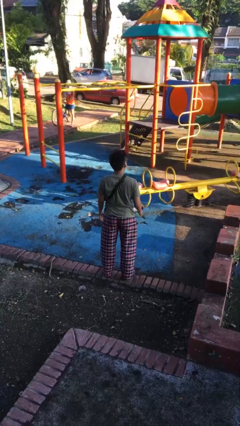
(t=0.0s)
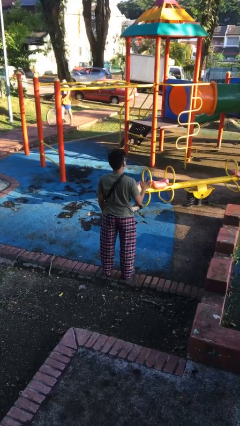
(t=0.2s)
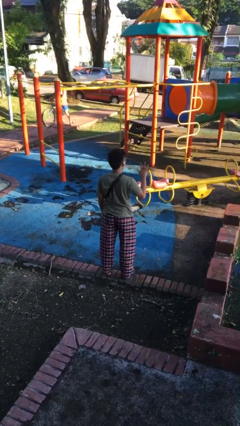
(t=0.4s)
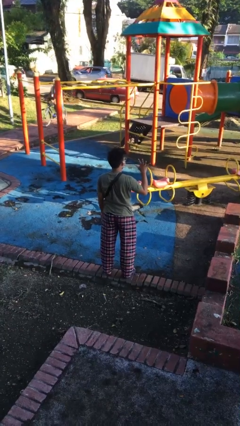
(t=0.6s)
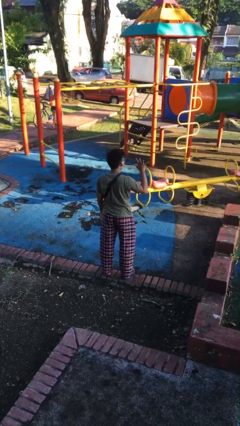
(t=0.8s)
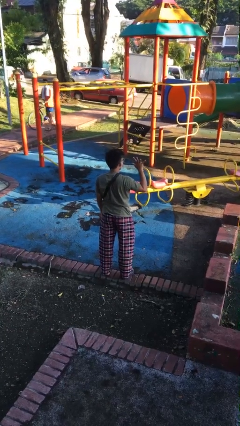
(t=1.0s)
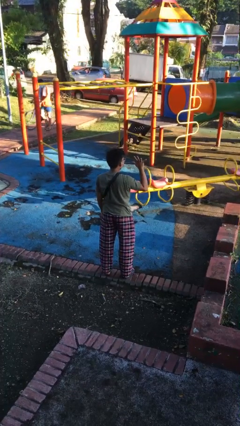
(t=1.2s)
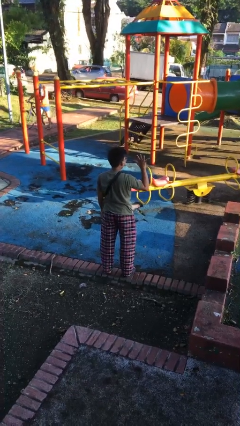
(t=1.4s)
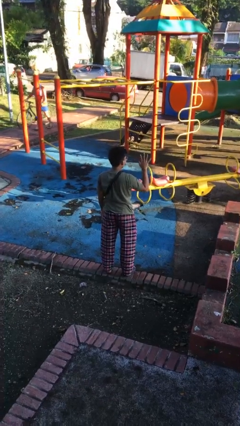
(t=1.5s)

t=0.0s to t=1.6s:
person gestures number five

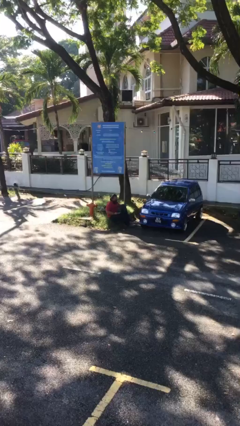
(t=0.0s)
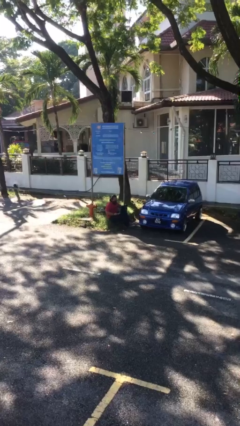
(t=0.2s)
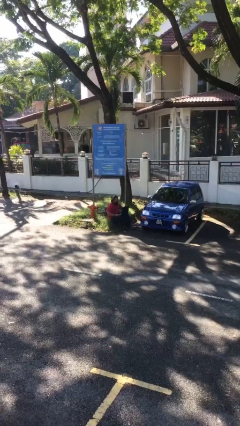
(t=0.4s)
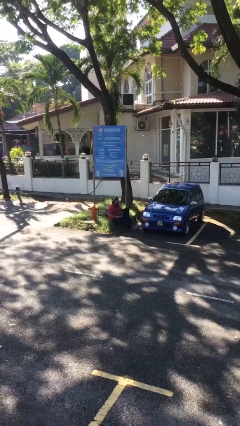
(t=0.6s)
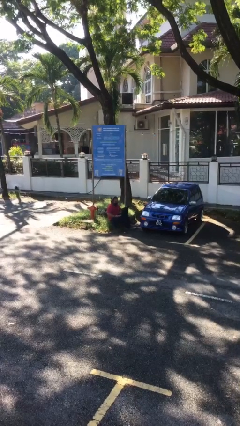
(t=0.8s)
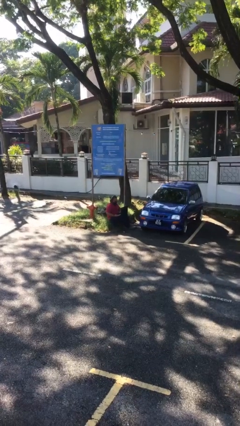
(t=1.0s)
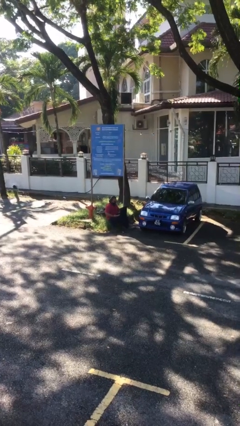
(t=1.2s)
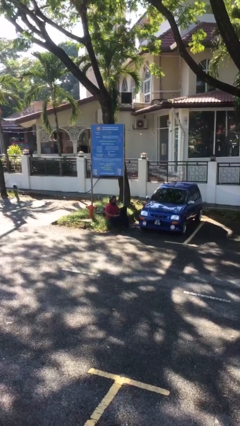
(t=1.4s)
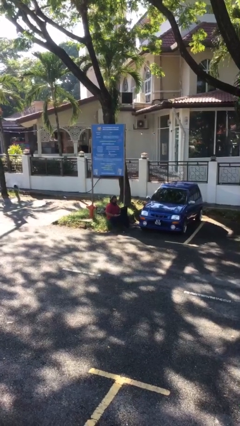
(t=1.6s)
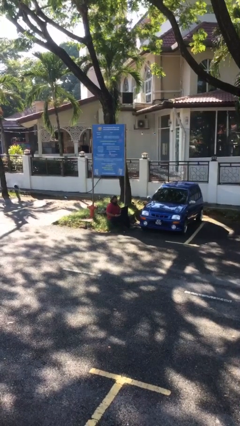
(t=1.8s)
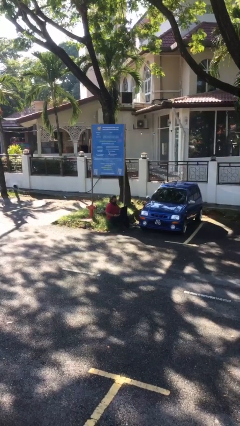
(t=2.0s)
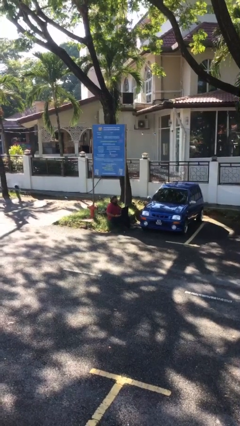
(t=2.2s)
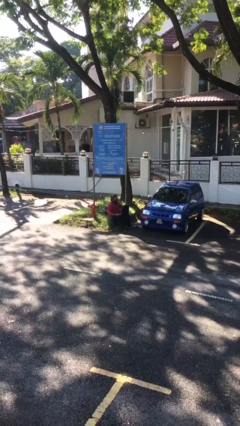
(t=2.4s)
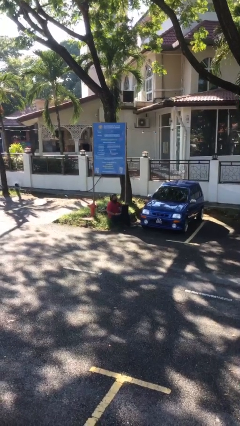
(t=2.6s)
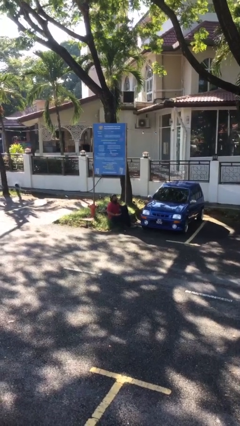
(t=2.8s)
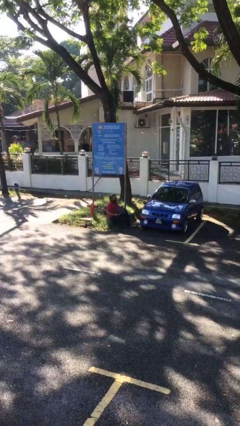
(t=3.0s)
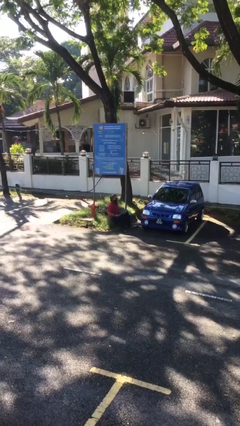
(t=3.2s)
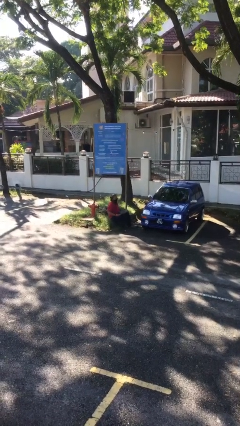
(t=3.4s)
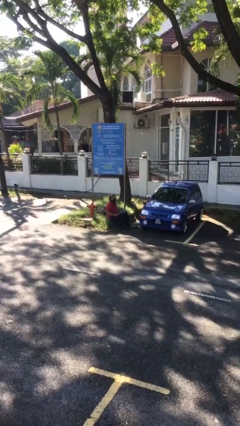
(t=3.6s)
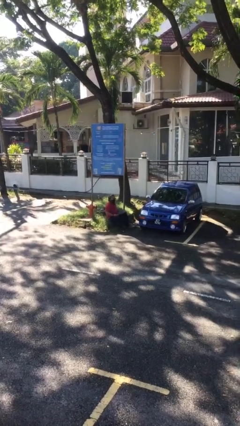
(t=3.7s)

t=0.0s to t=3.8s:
person interacts with laptop

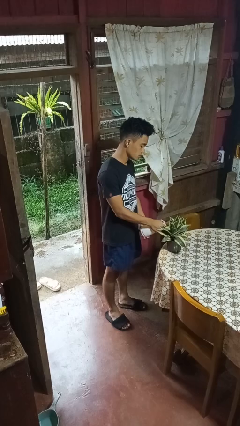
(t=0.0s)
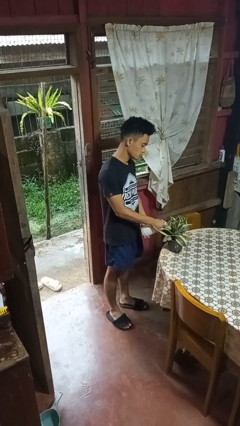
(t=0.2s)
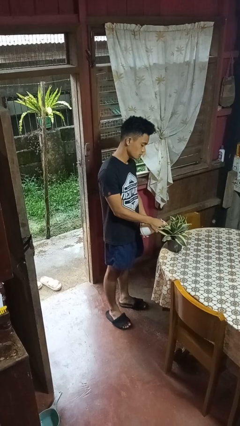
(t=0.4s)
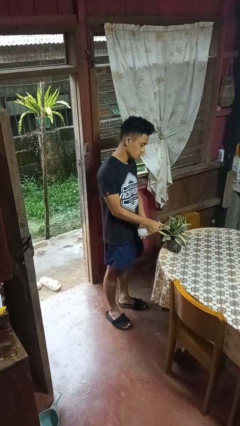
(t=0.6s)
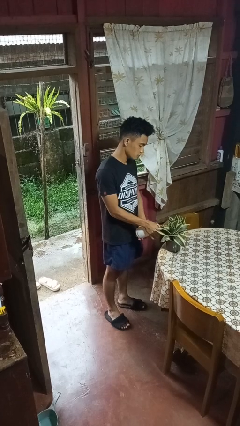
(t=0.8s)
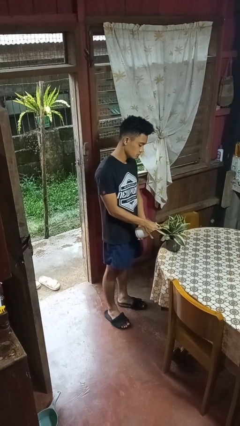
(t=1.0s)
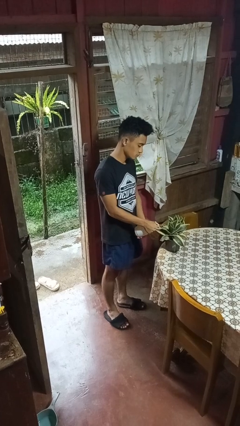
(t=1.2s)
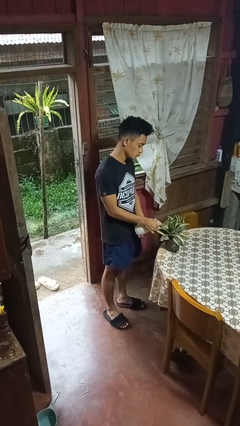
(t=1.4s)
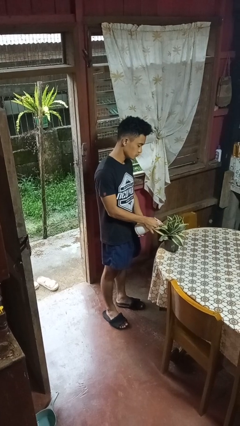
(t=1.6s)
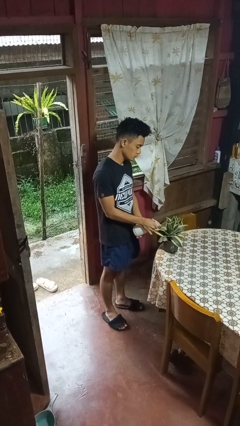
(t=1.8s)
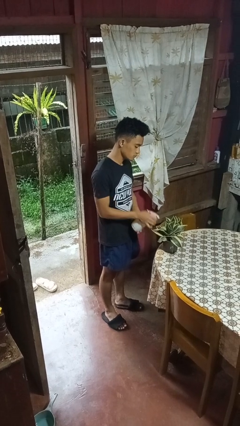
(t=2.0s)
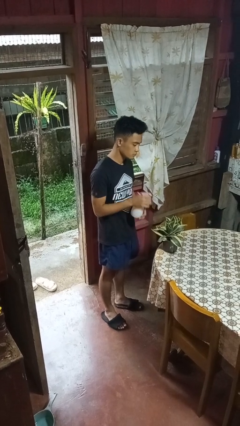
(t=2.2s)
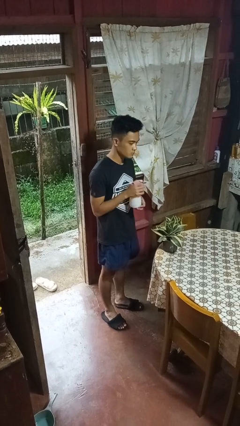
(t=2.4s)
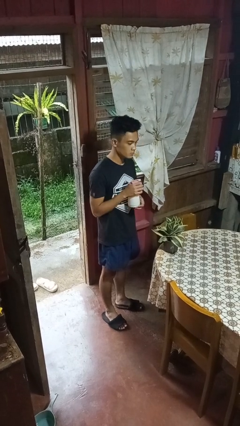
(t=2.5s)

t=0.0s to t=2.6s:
person waters houseplant

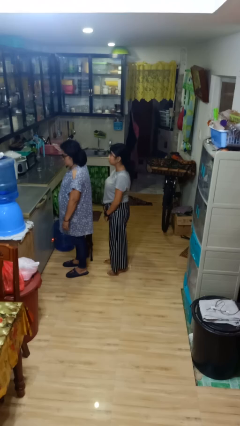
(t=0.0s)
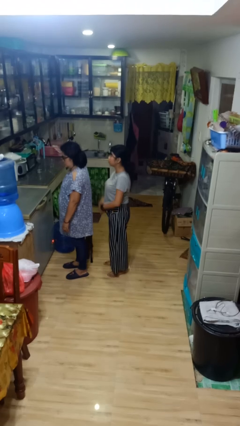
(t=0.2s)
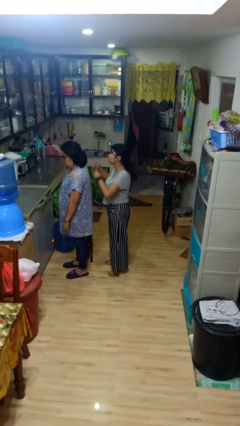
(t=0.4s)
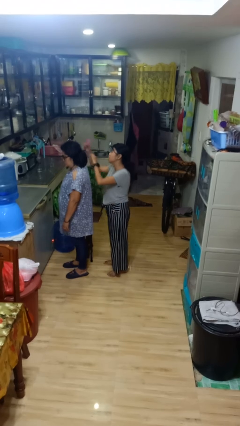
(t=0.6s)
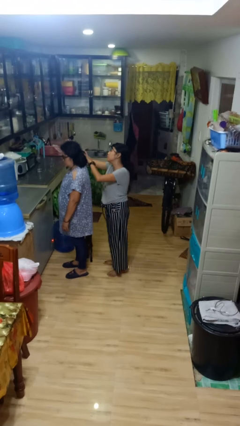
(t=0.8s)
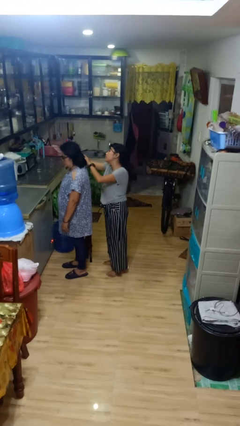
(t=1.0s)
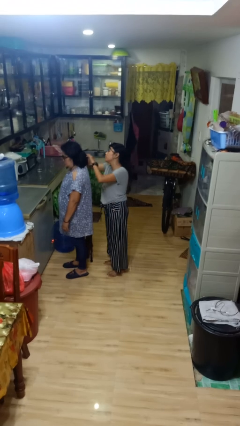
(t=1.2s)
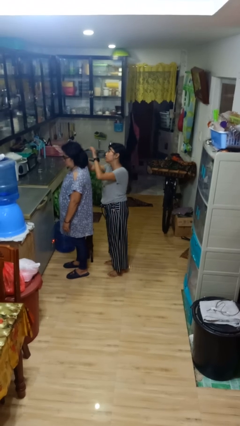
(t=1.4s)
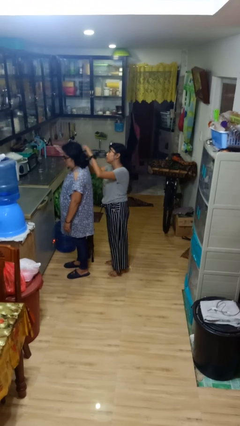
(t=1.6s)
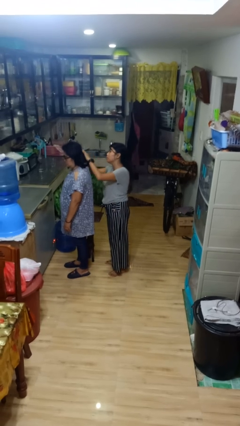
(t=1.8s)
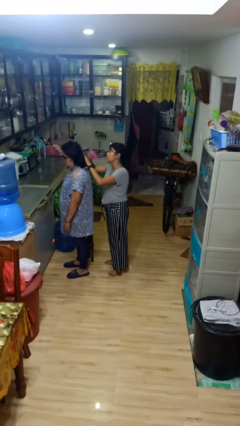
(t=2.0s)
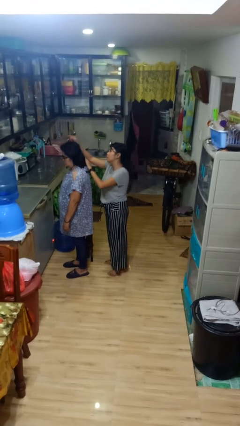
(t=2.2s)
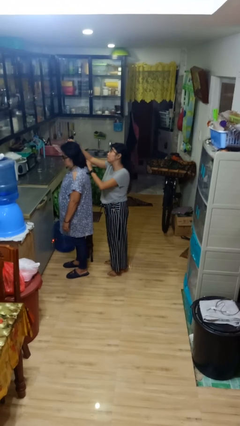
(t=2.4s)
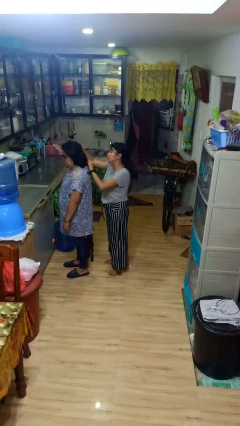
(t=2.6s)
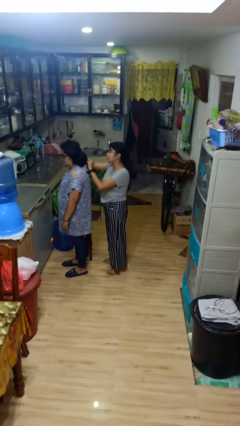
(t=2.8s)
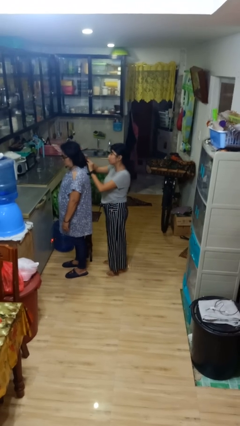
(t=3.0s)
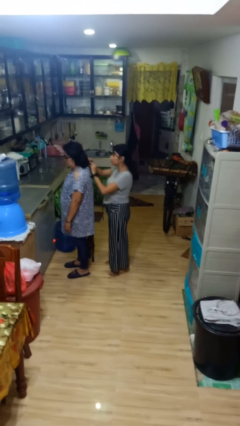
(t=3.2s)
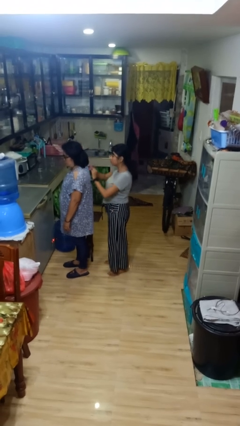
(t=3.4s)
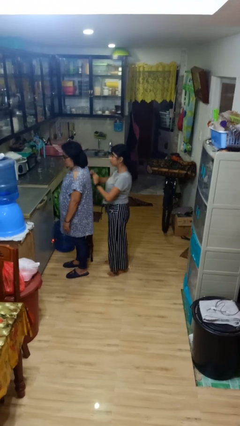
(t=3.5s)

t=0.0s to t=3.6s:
person brushes hair of person

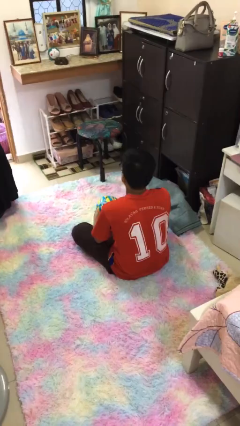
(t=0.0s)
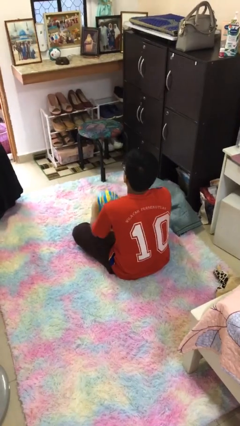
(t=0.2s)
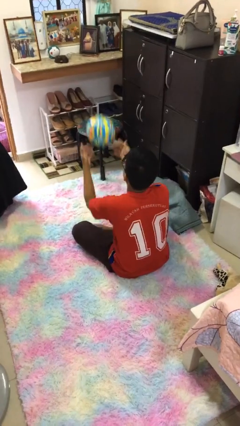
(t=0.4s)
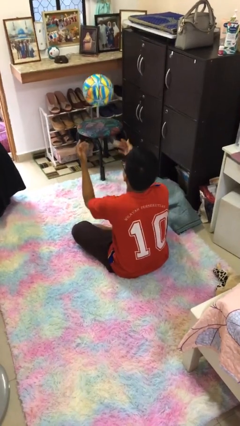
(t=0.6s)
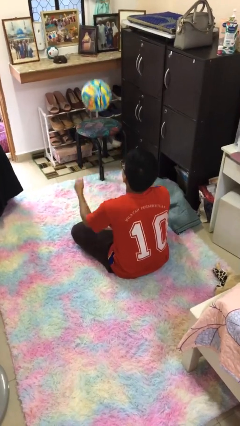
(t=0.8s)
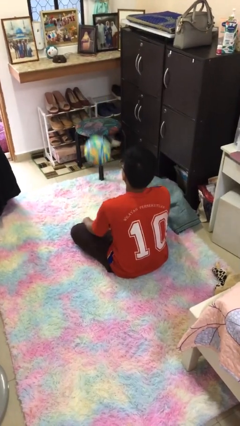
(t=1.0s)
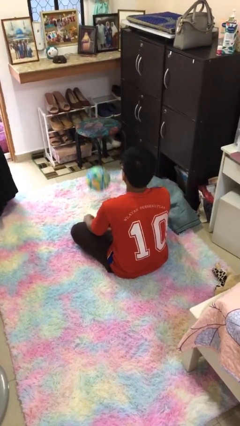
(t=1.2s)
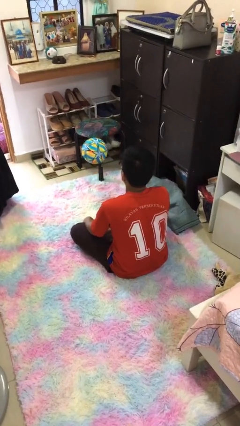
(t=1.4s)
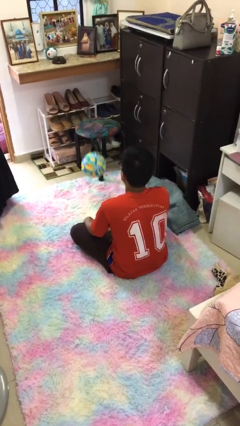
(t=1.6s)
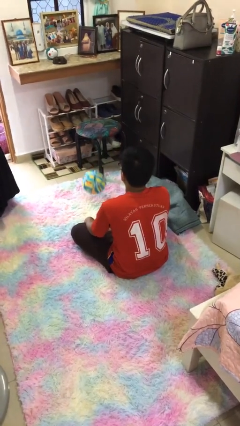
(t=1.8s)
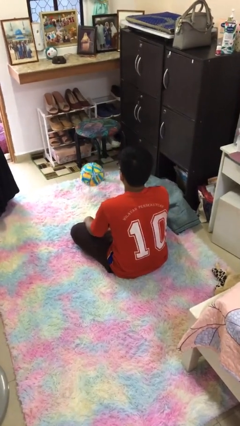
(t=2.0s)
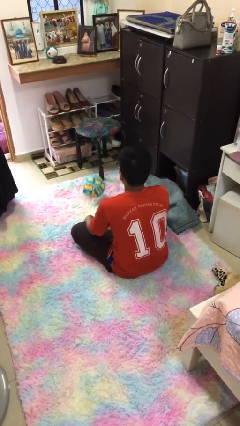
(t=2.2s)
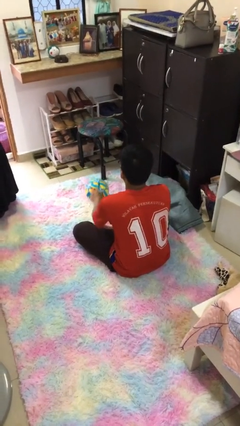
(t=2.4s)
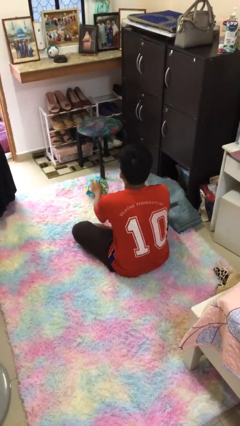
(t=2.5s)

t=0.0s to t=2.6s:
person bounces ball on floor

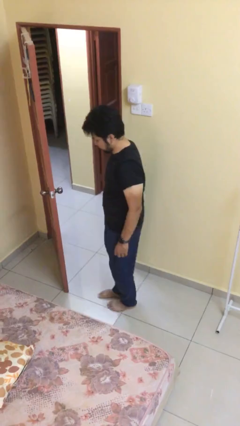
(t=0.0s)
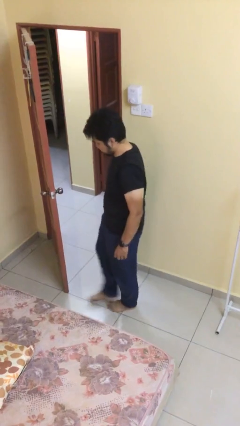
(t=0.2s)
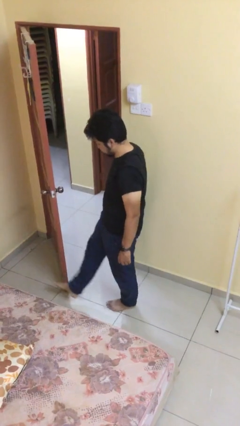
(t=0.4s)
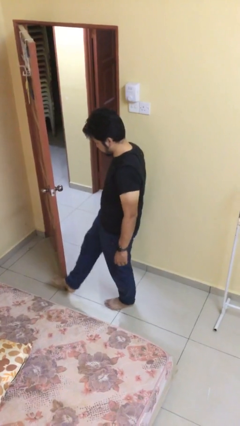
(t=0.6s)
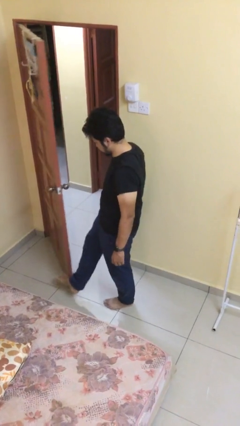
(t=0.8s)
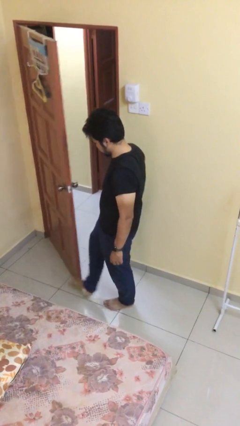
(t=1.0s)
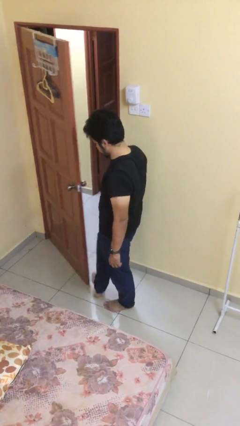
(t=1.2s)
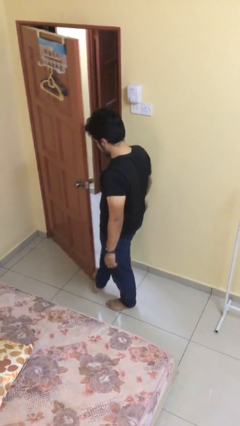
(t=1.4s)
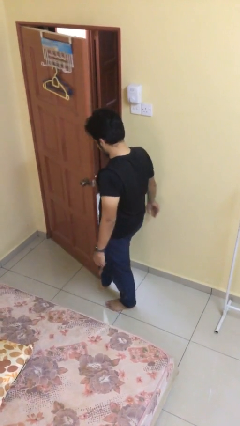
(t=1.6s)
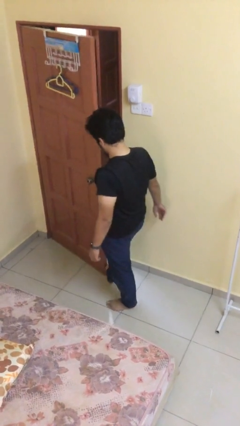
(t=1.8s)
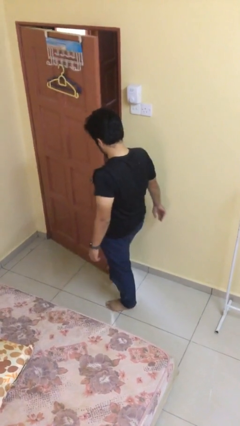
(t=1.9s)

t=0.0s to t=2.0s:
person closes door with foot

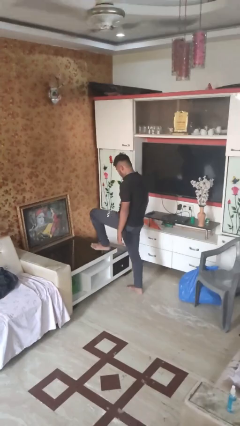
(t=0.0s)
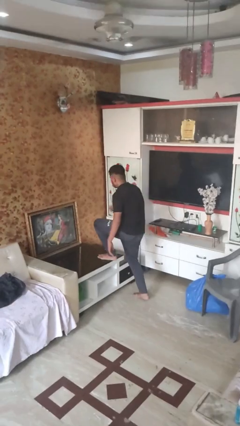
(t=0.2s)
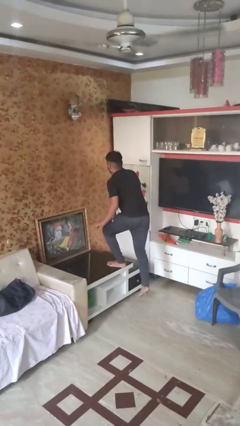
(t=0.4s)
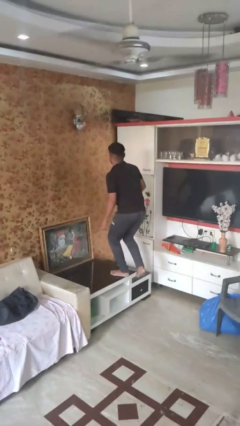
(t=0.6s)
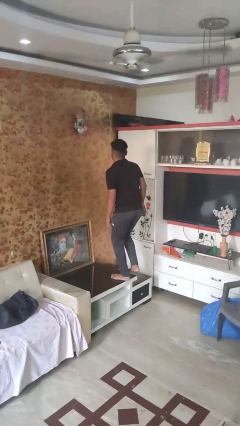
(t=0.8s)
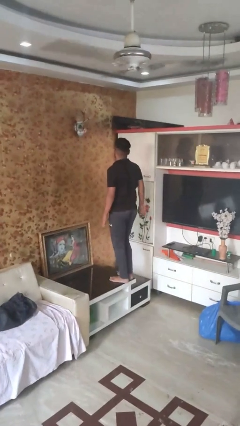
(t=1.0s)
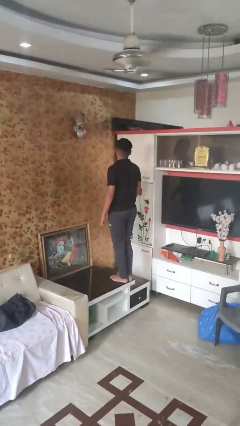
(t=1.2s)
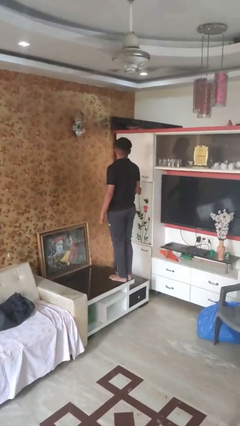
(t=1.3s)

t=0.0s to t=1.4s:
person climbs on table
